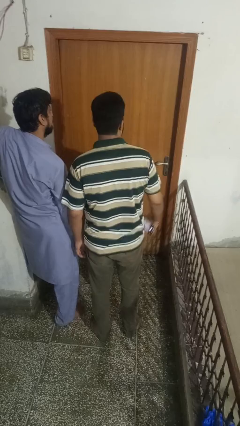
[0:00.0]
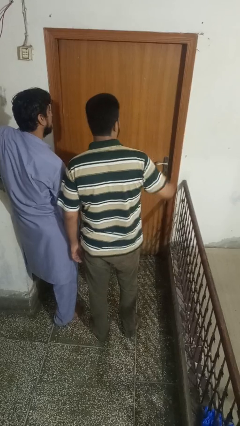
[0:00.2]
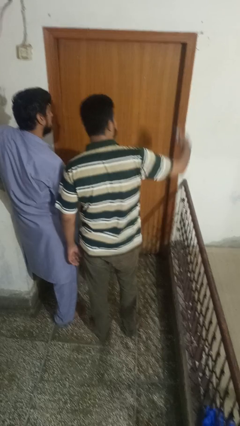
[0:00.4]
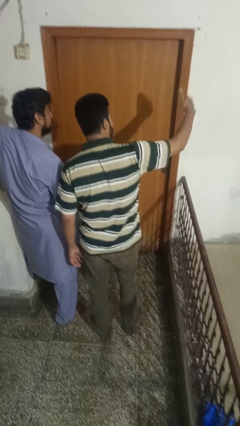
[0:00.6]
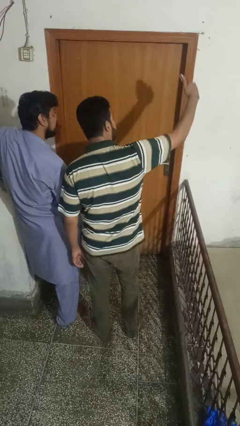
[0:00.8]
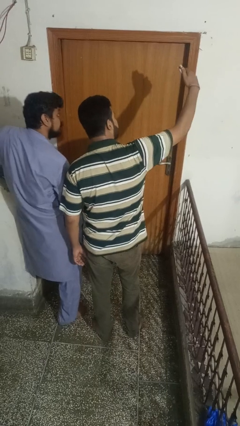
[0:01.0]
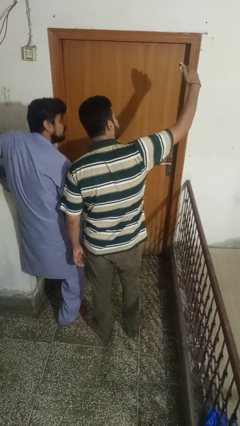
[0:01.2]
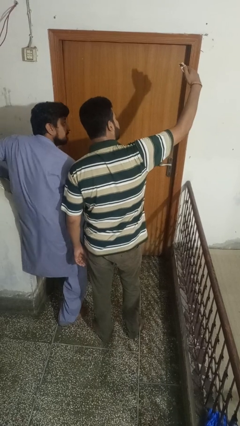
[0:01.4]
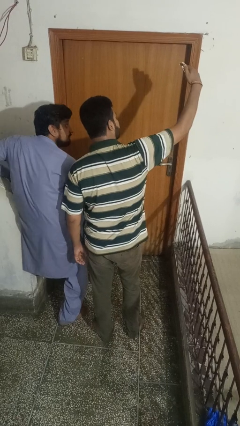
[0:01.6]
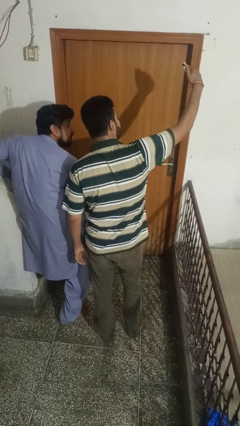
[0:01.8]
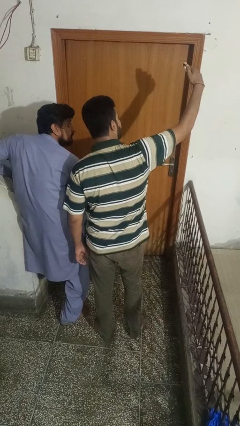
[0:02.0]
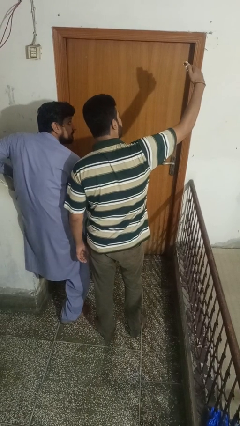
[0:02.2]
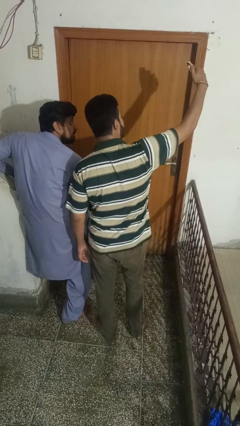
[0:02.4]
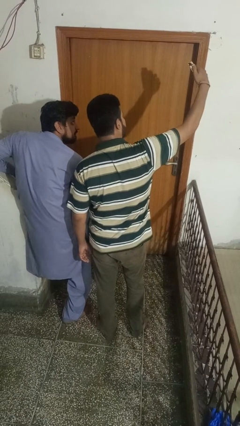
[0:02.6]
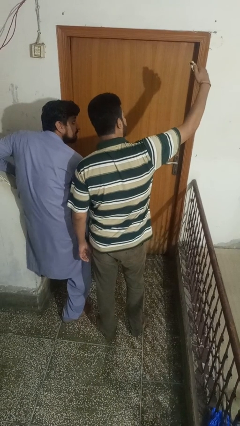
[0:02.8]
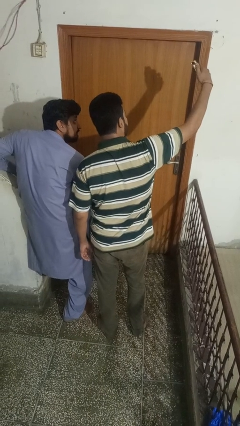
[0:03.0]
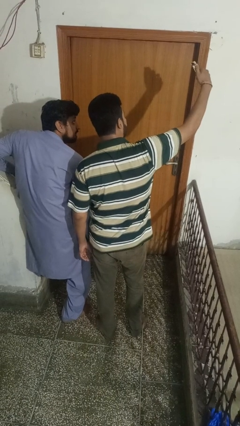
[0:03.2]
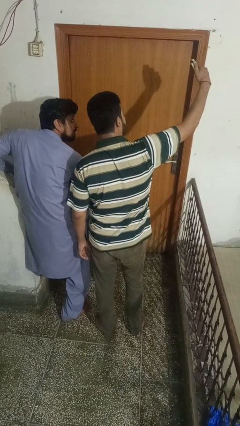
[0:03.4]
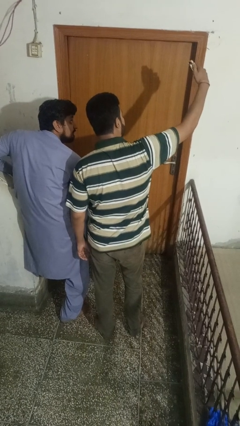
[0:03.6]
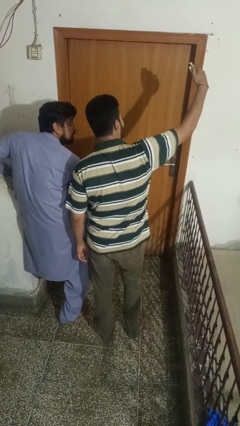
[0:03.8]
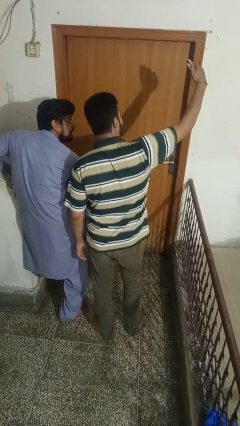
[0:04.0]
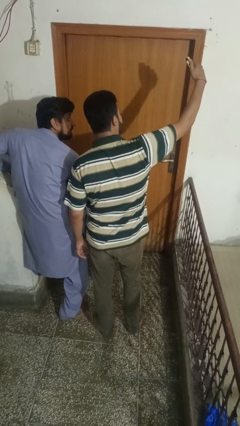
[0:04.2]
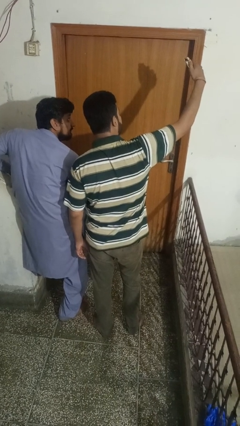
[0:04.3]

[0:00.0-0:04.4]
person takes selfie with person

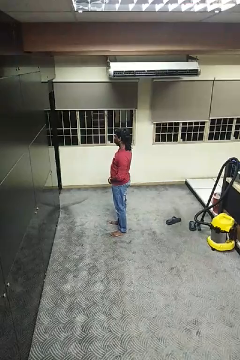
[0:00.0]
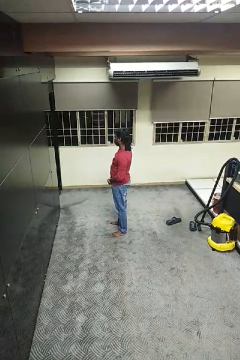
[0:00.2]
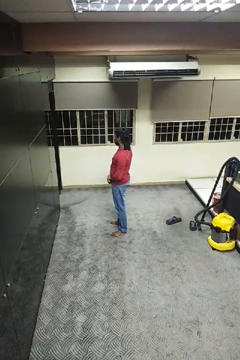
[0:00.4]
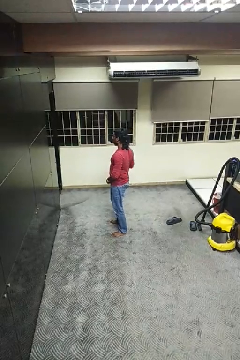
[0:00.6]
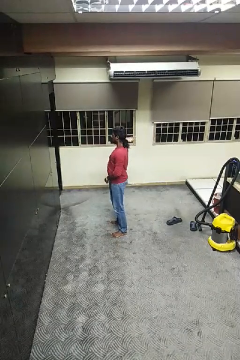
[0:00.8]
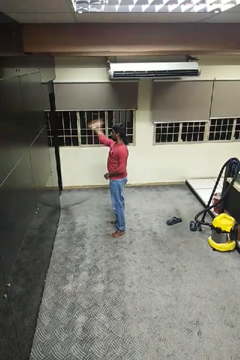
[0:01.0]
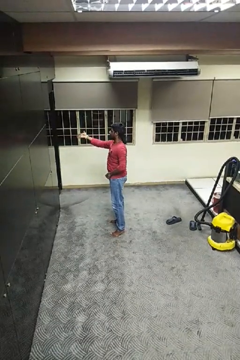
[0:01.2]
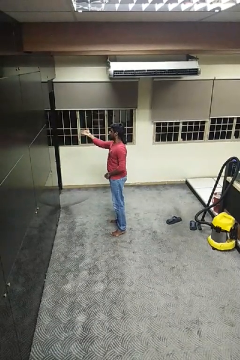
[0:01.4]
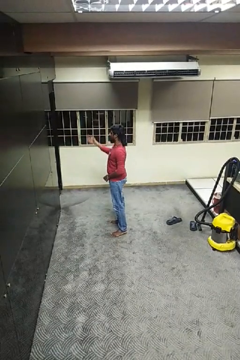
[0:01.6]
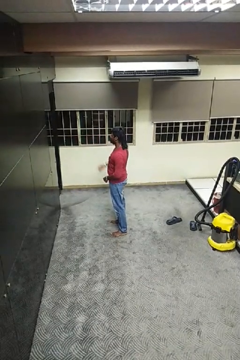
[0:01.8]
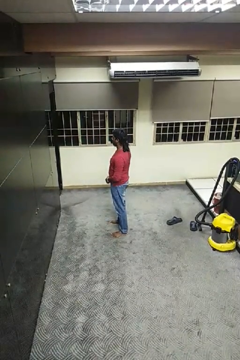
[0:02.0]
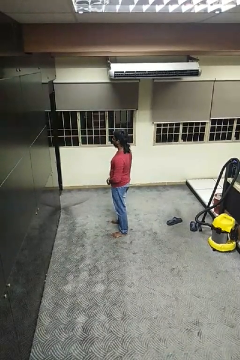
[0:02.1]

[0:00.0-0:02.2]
person karate chop

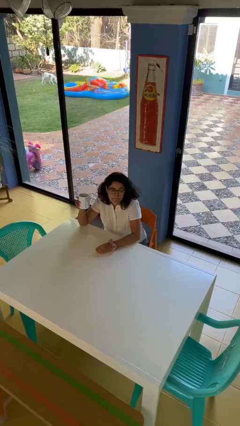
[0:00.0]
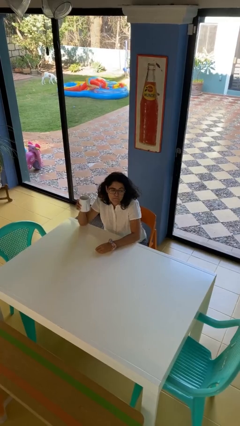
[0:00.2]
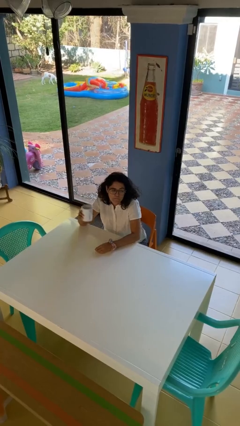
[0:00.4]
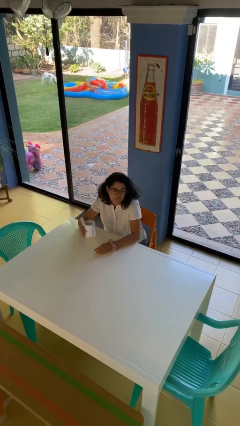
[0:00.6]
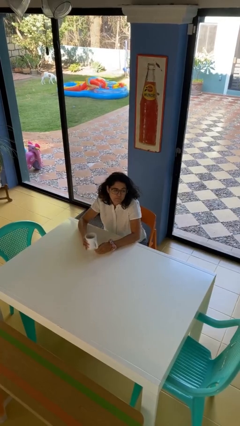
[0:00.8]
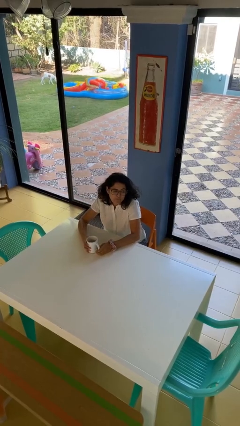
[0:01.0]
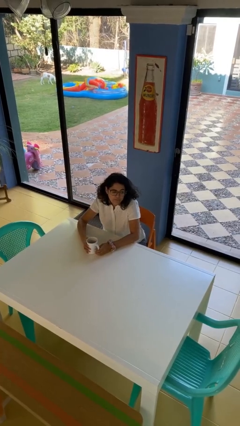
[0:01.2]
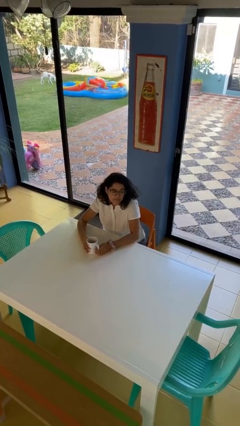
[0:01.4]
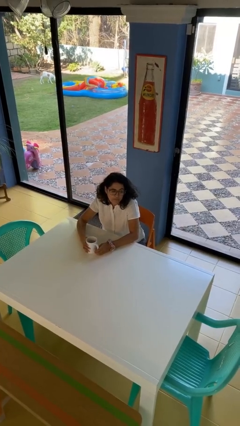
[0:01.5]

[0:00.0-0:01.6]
person puts down object on table

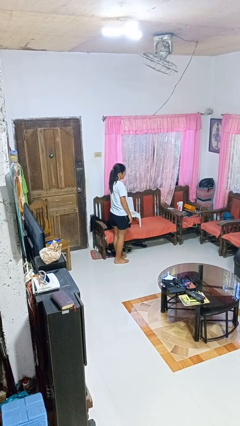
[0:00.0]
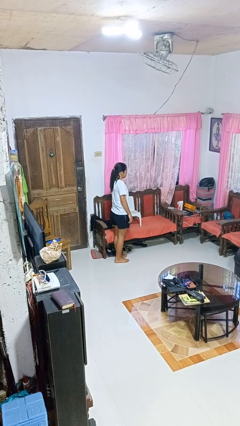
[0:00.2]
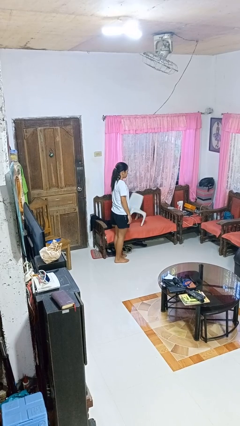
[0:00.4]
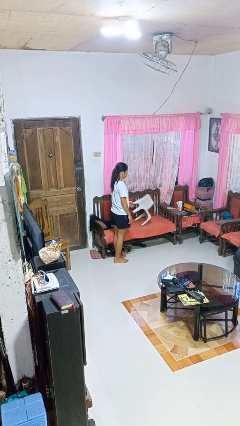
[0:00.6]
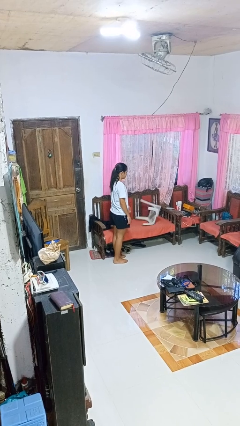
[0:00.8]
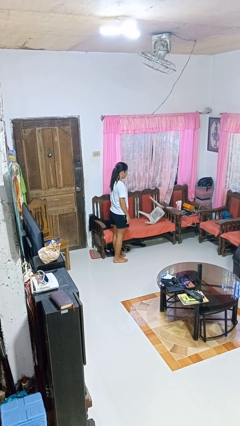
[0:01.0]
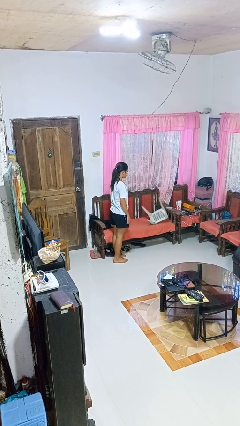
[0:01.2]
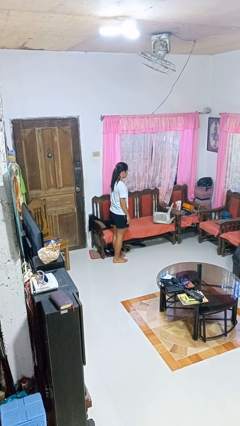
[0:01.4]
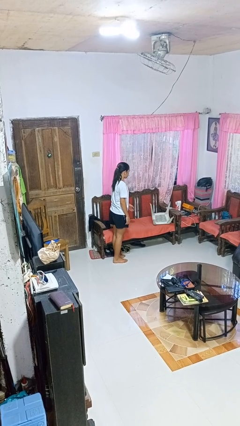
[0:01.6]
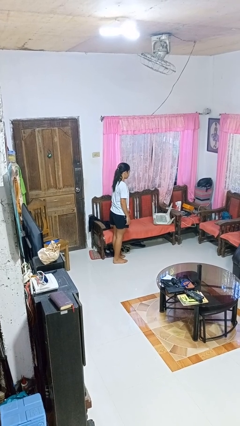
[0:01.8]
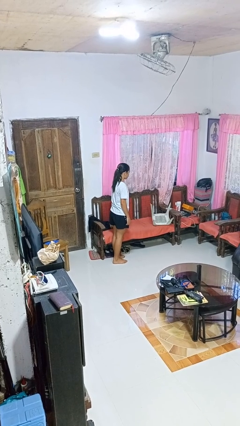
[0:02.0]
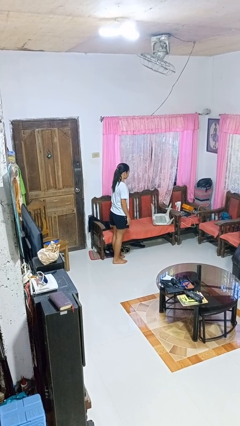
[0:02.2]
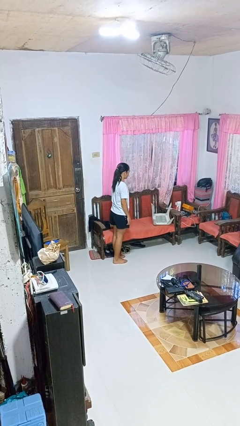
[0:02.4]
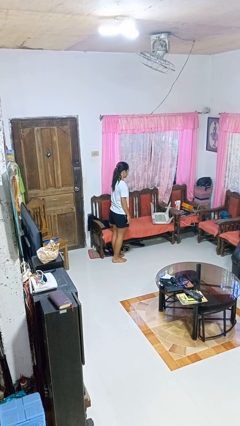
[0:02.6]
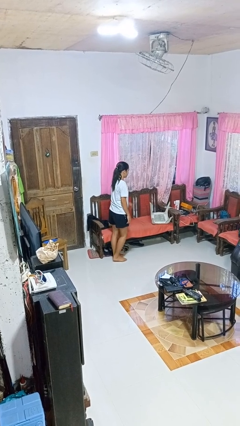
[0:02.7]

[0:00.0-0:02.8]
person knocks over furniture

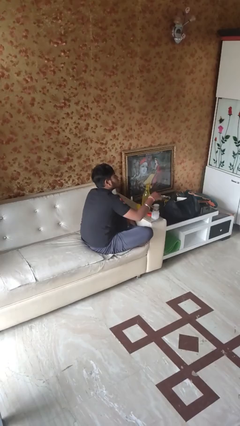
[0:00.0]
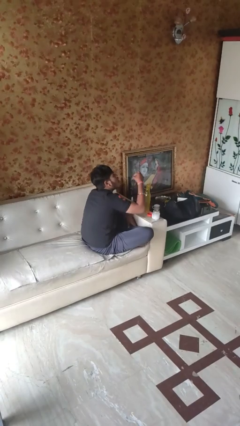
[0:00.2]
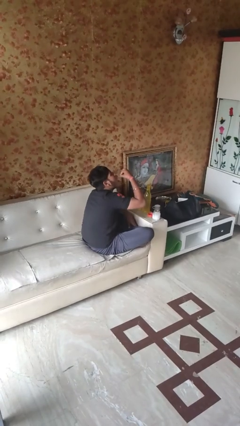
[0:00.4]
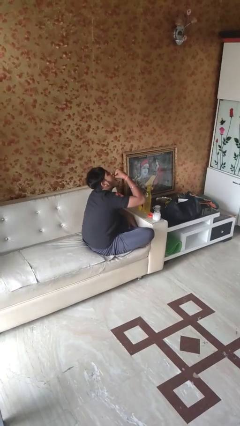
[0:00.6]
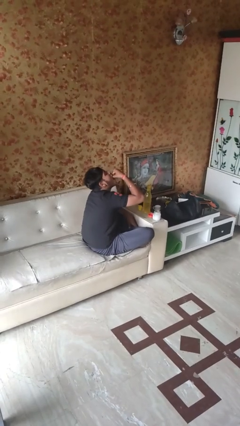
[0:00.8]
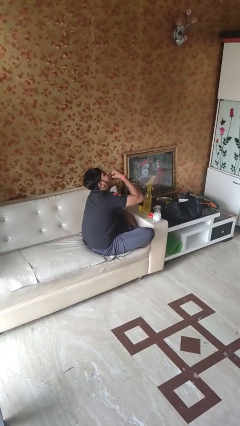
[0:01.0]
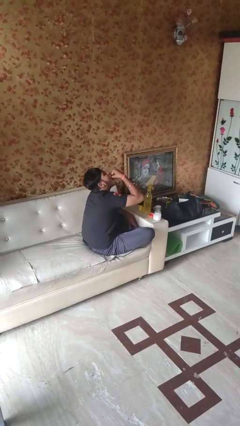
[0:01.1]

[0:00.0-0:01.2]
person takes medicine pills

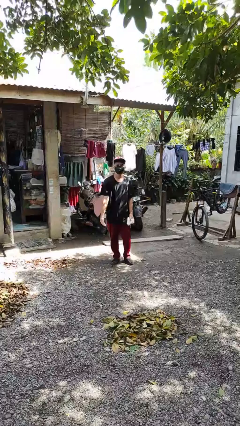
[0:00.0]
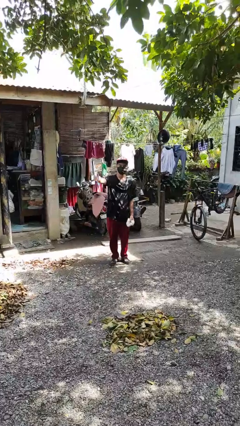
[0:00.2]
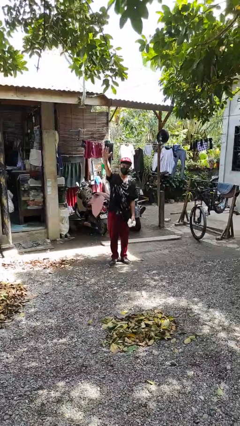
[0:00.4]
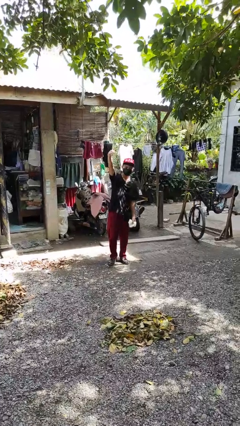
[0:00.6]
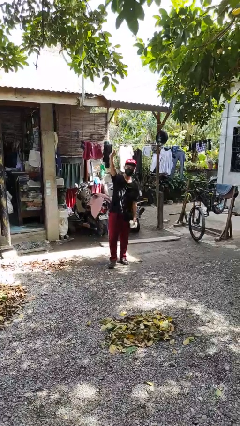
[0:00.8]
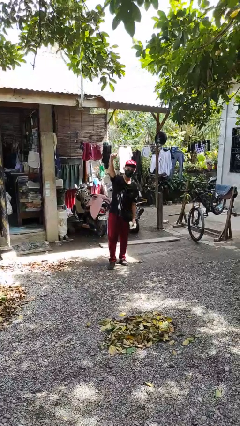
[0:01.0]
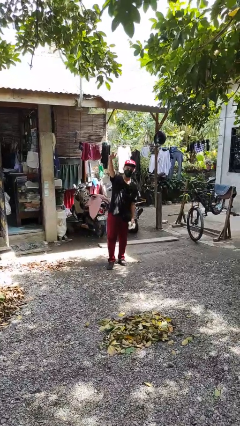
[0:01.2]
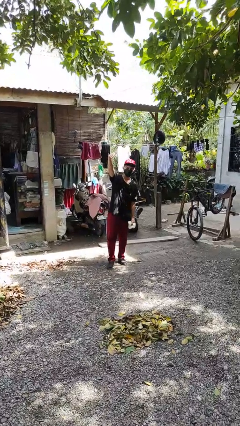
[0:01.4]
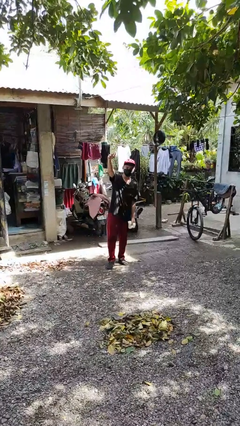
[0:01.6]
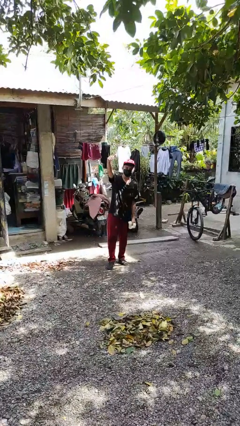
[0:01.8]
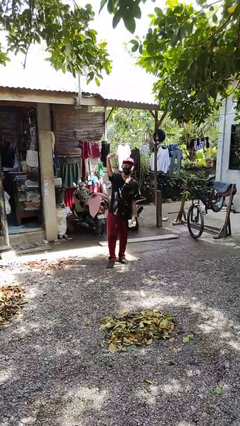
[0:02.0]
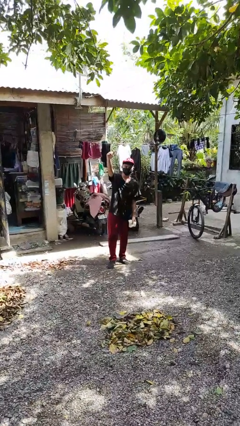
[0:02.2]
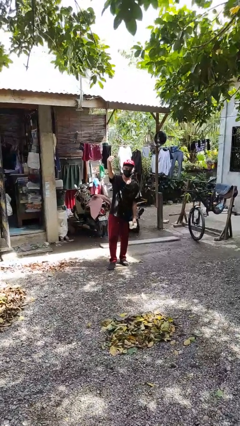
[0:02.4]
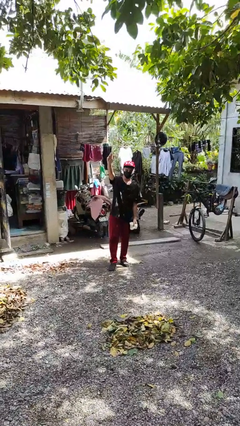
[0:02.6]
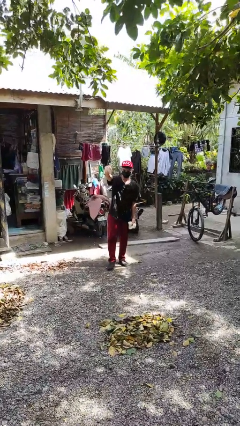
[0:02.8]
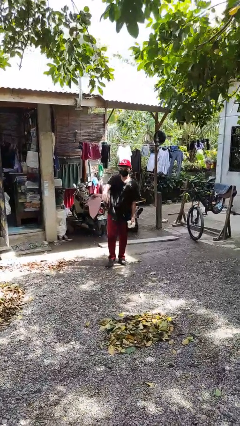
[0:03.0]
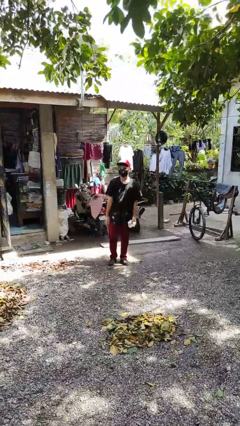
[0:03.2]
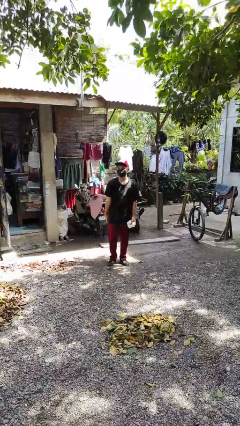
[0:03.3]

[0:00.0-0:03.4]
person gestures come here

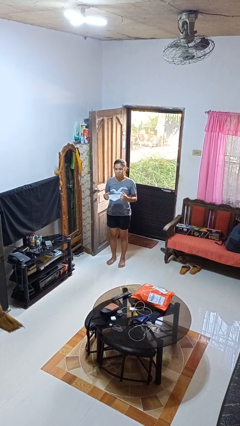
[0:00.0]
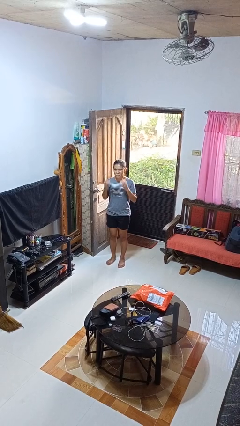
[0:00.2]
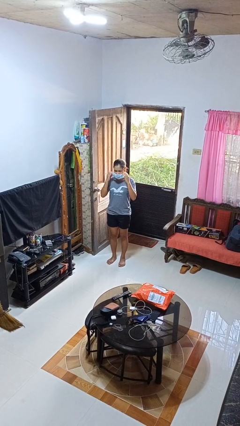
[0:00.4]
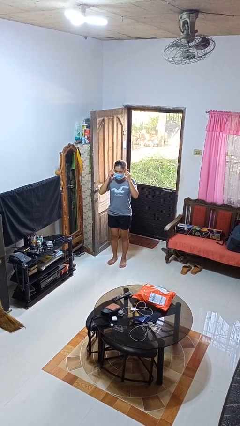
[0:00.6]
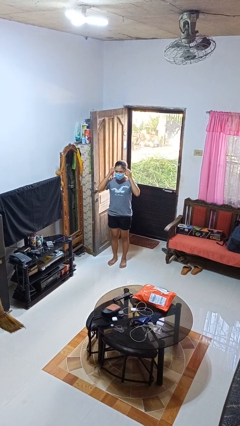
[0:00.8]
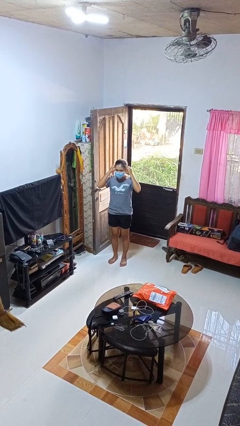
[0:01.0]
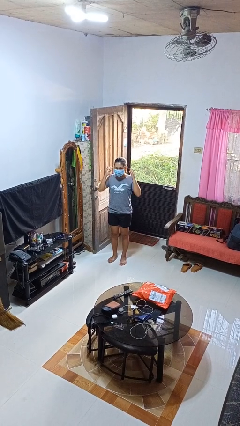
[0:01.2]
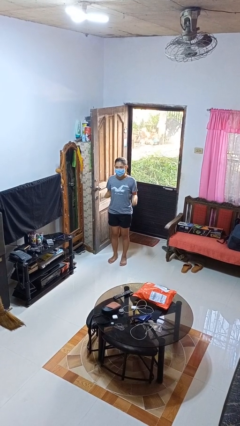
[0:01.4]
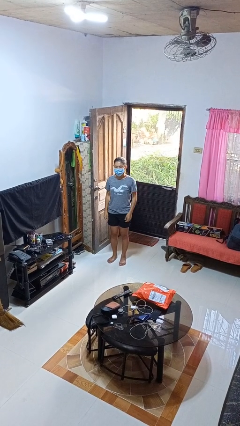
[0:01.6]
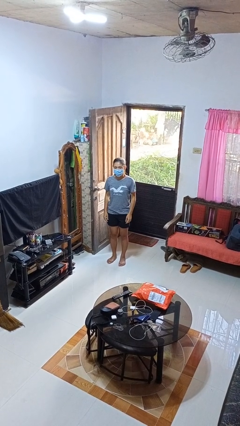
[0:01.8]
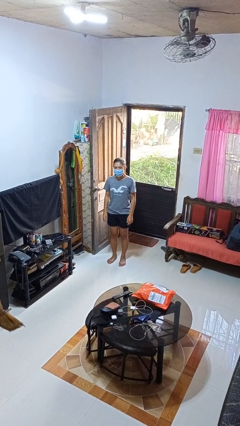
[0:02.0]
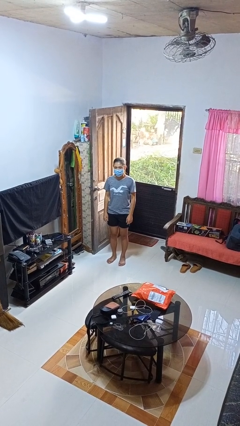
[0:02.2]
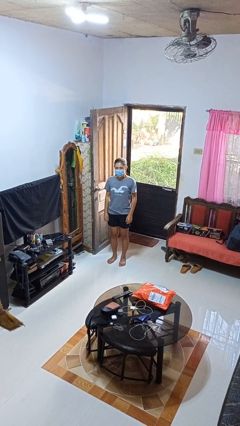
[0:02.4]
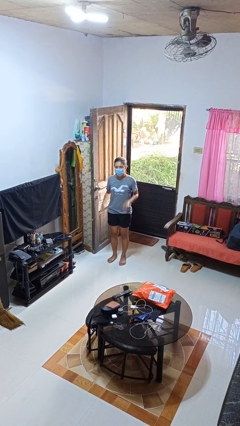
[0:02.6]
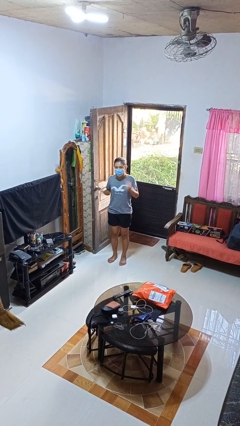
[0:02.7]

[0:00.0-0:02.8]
person puts on facemask
